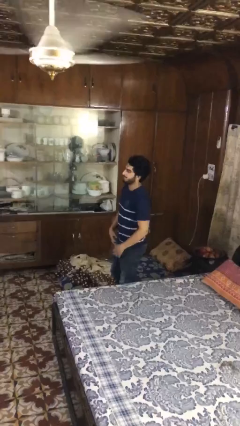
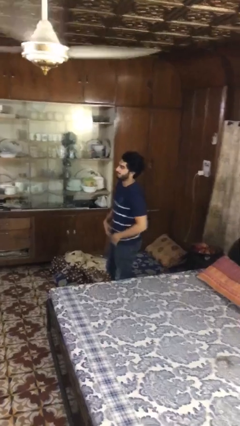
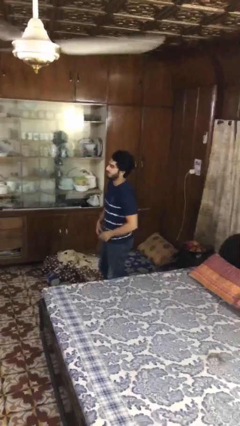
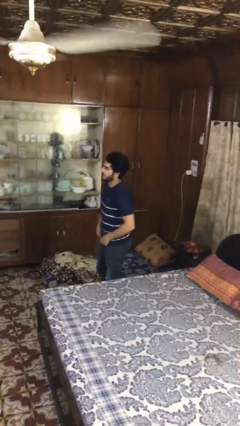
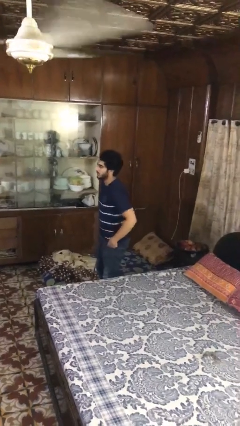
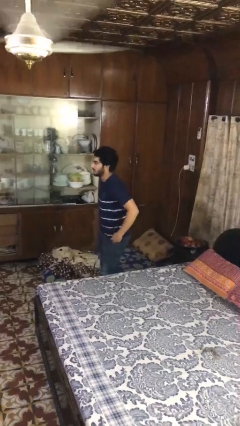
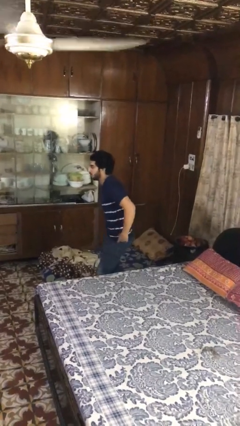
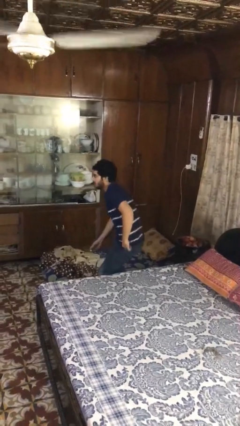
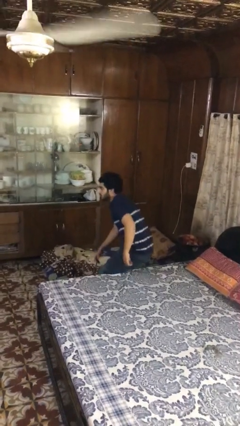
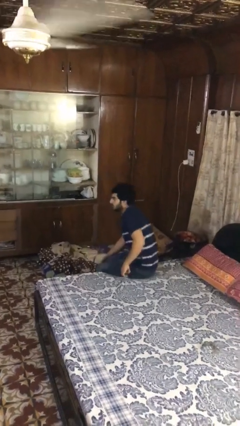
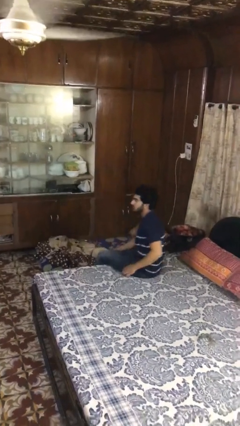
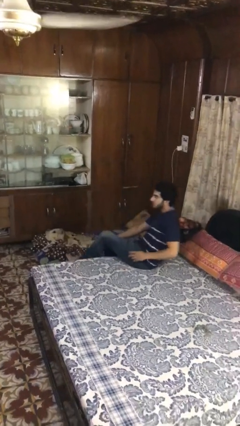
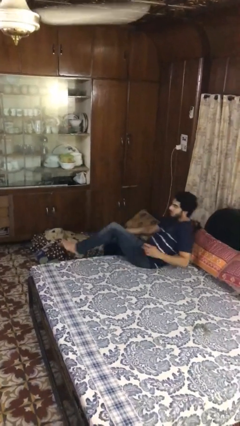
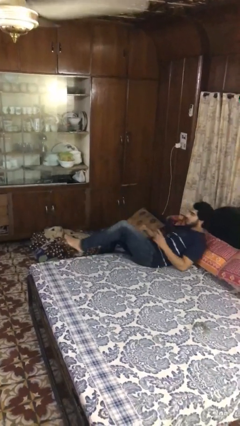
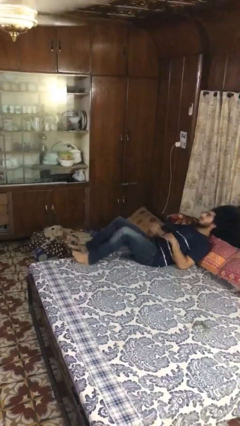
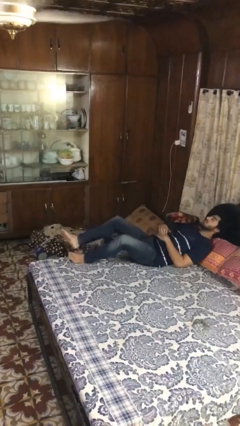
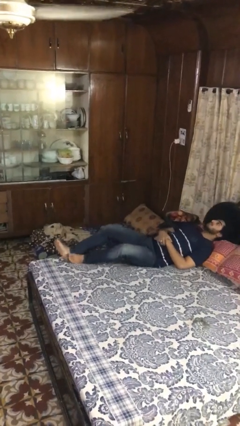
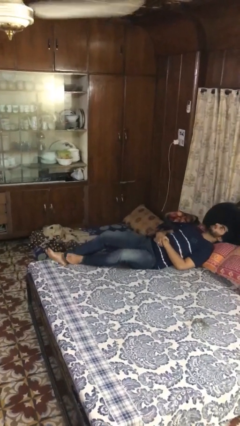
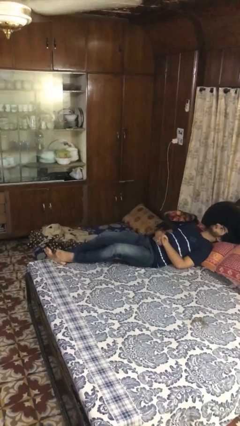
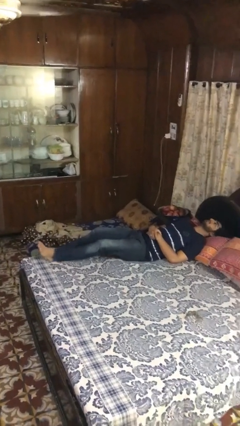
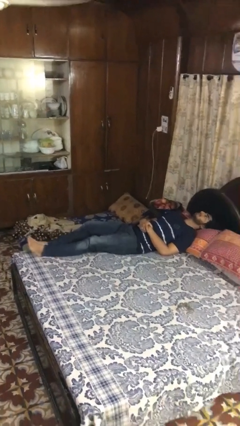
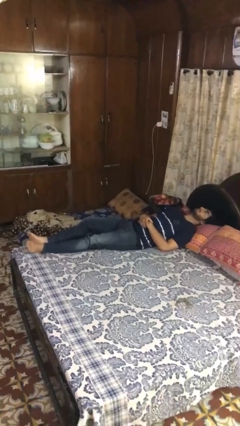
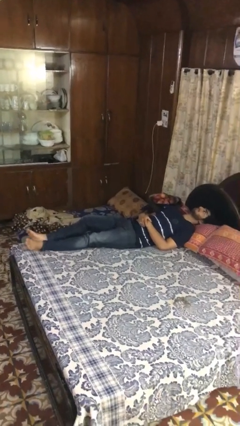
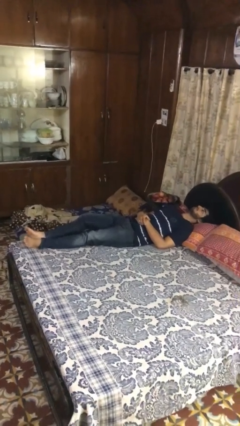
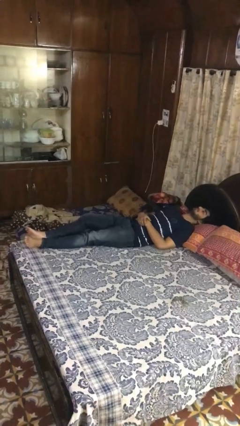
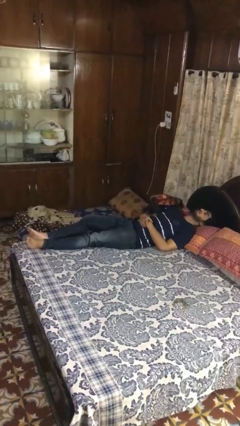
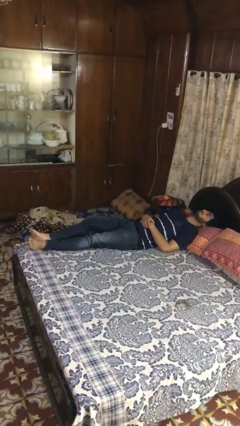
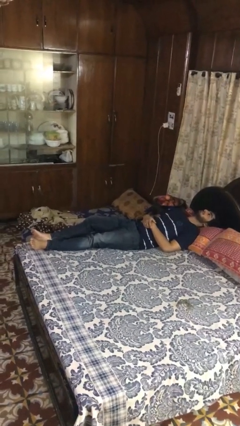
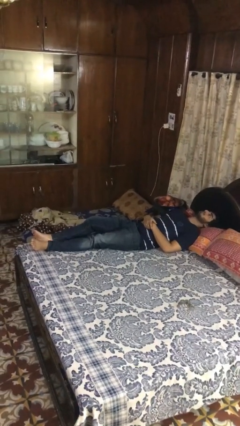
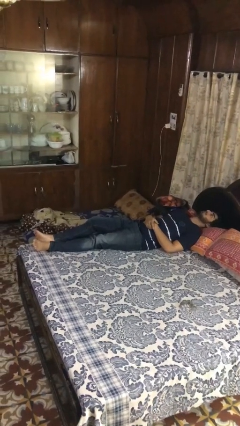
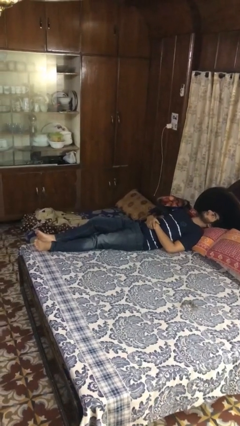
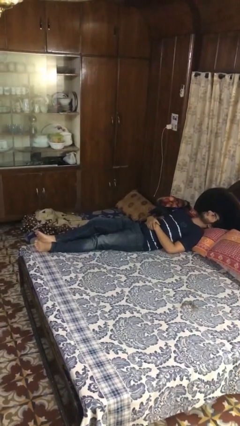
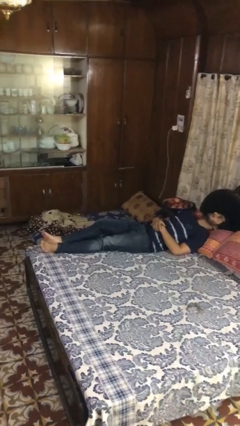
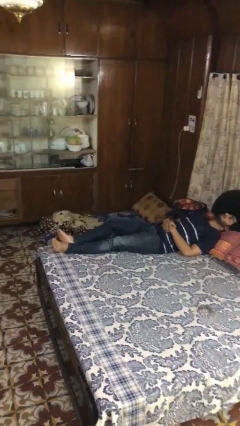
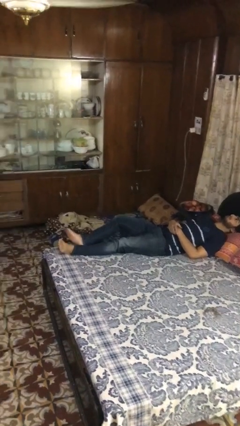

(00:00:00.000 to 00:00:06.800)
person lies down on bed

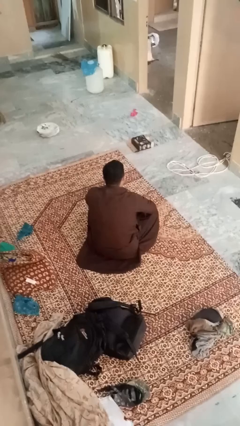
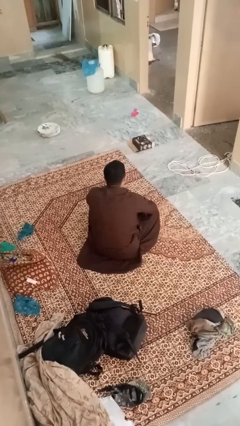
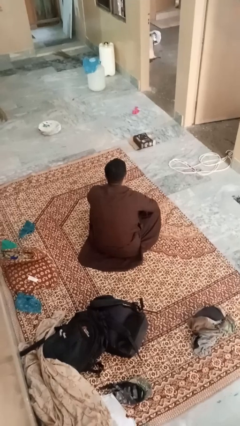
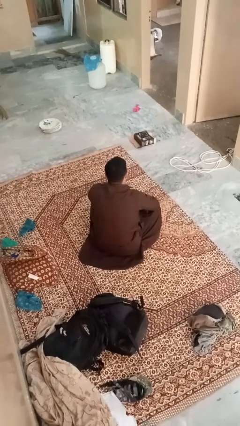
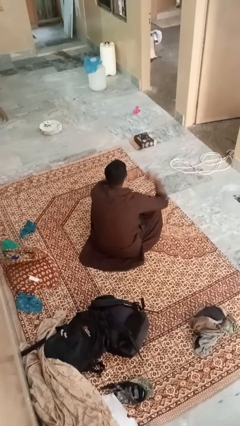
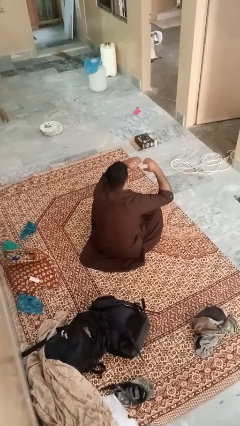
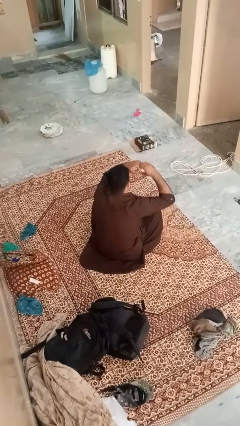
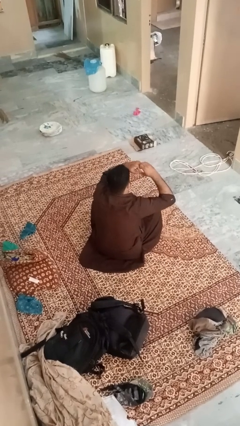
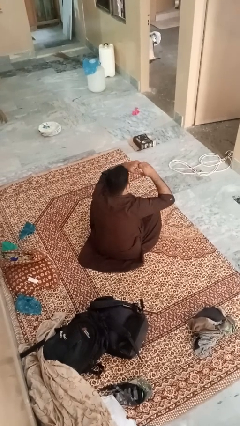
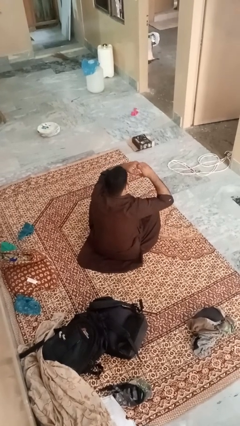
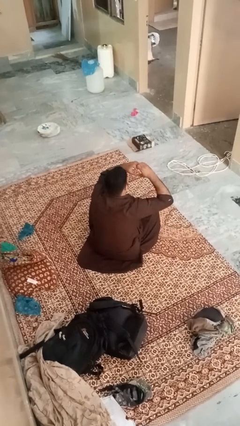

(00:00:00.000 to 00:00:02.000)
person gestures heart

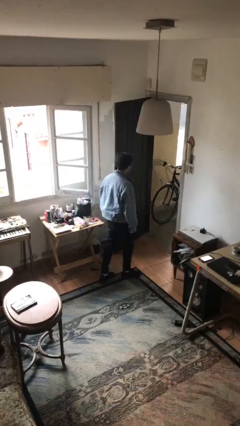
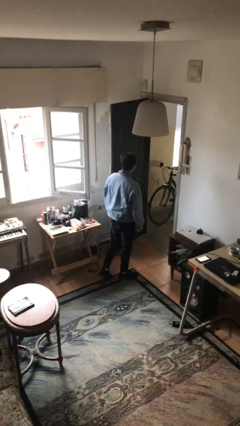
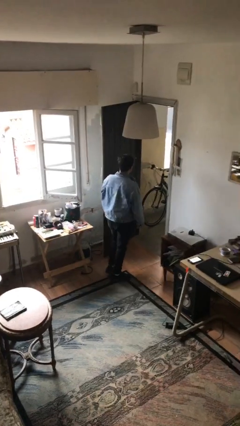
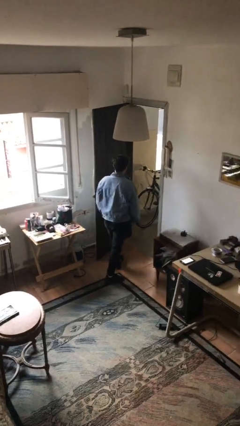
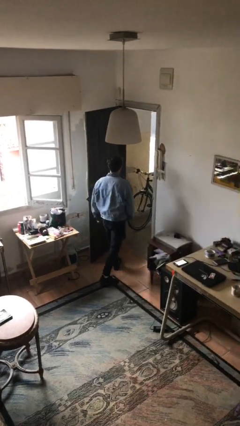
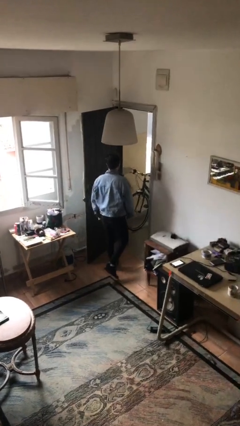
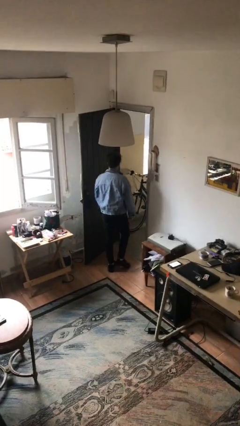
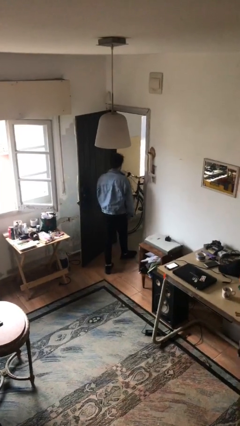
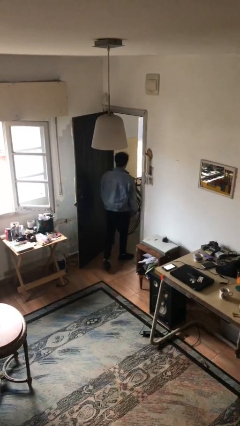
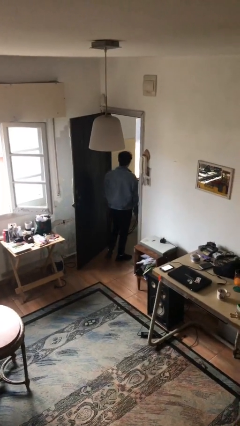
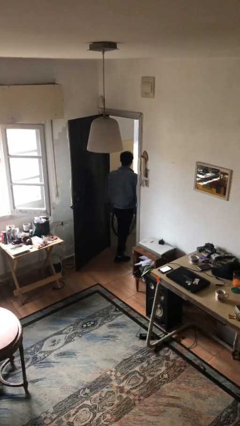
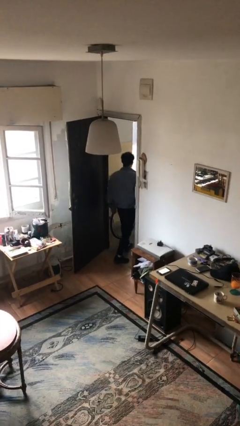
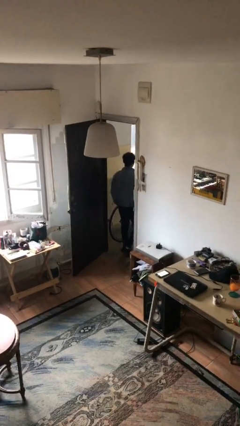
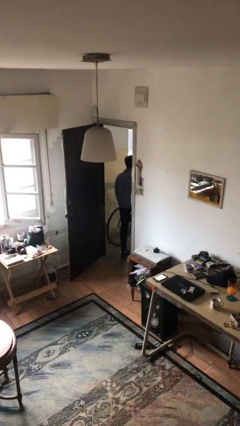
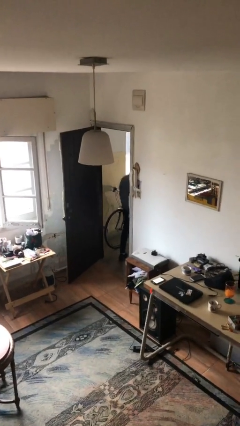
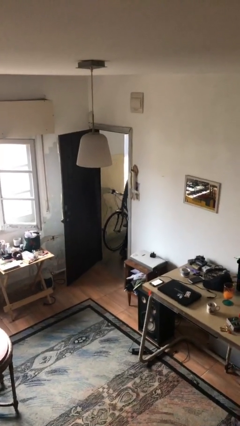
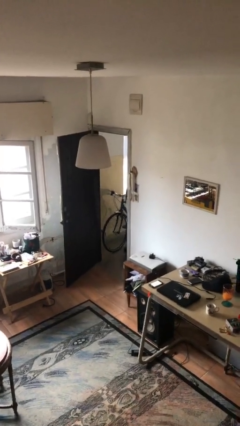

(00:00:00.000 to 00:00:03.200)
person exits scene through structure

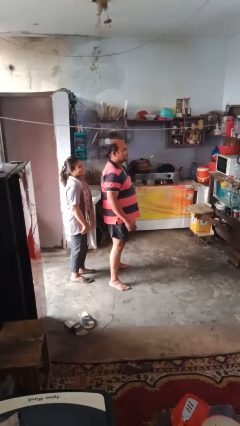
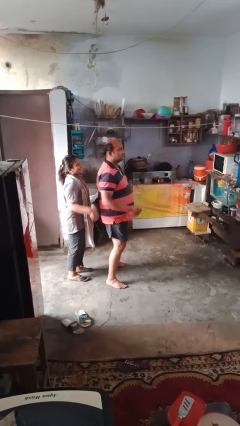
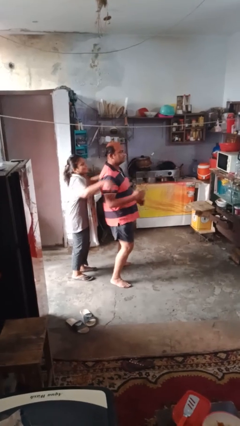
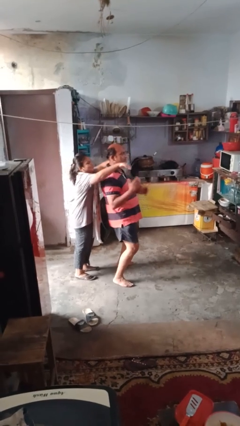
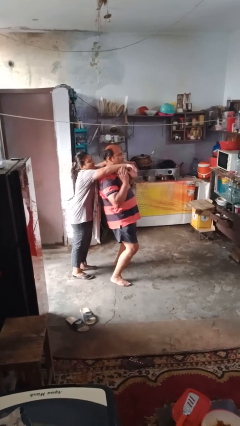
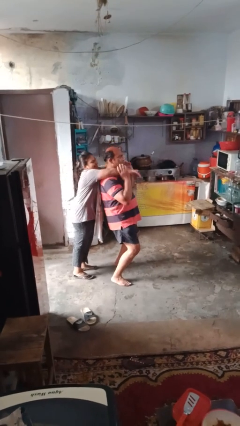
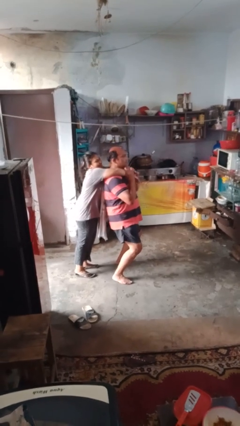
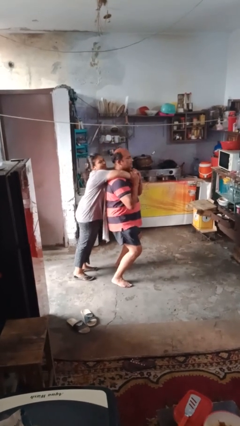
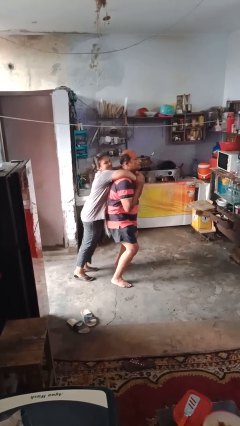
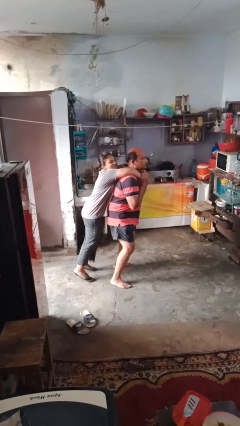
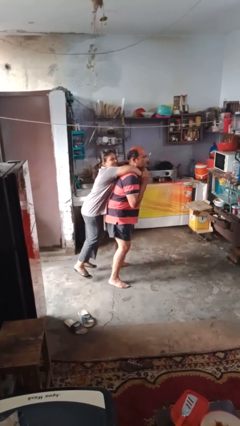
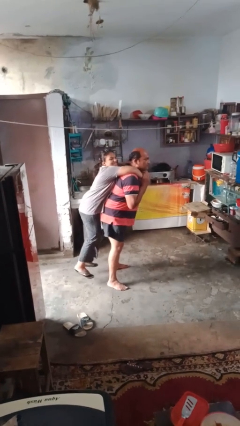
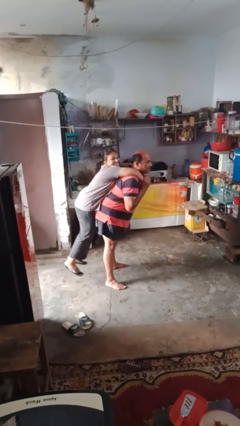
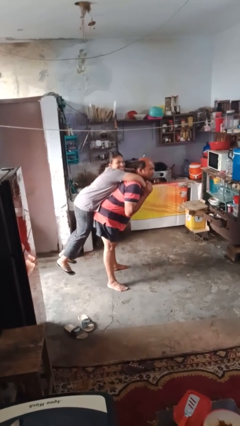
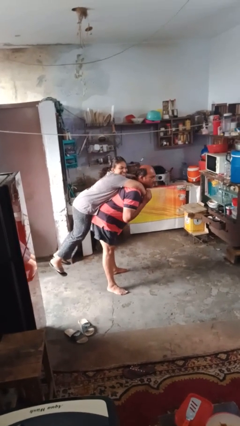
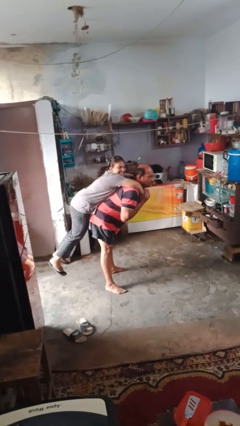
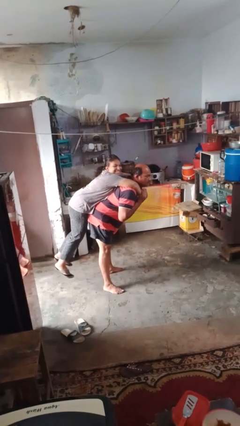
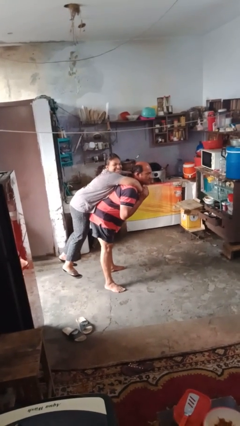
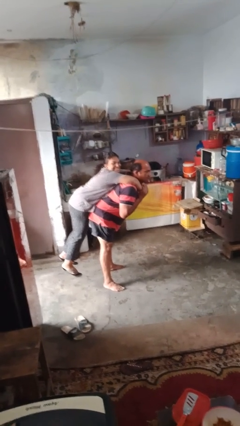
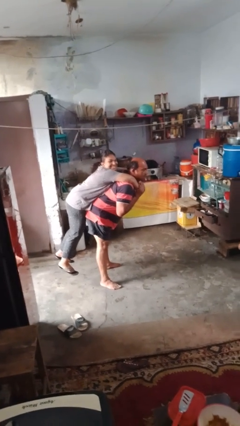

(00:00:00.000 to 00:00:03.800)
person carries person on shoulders

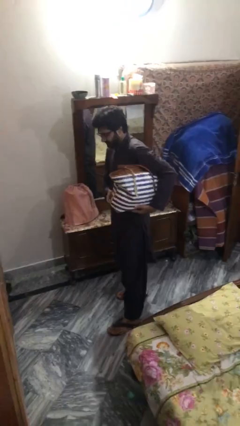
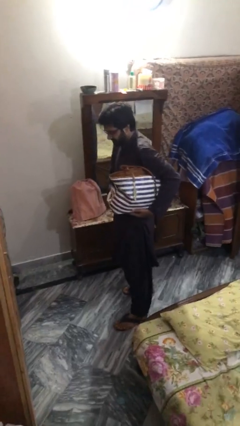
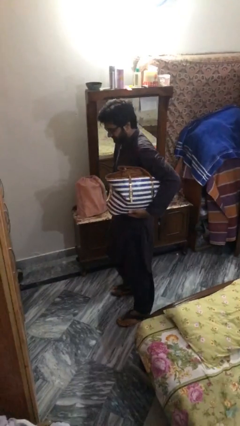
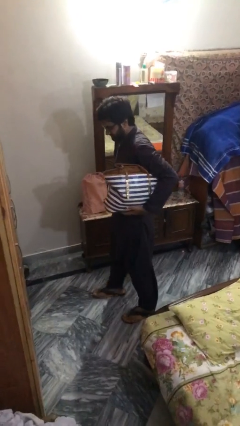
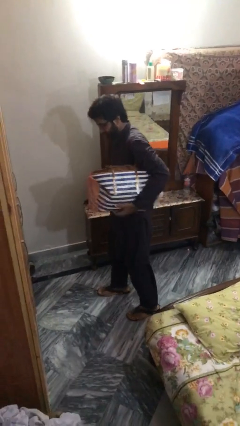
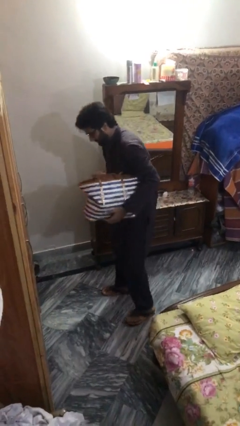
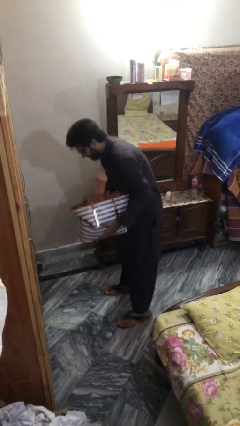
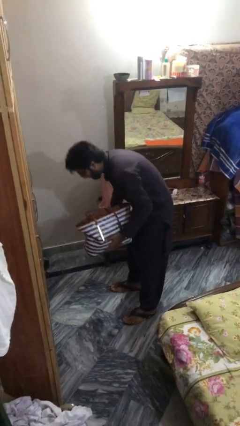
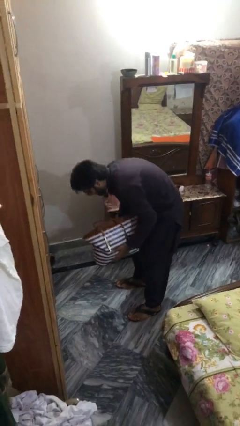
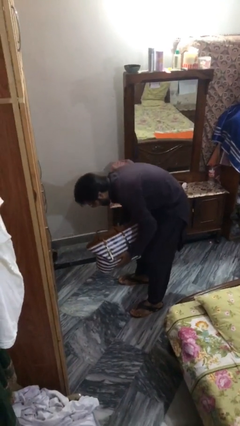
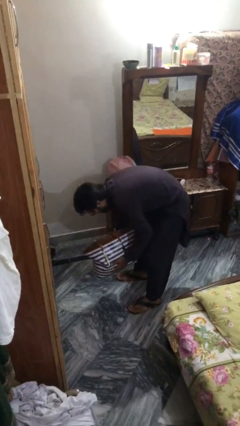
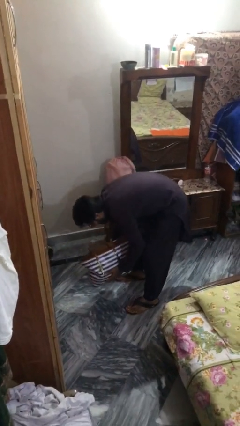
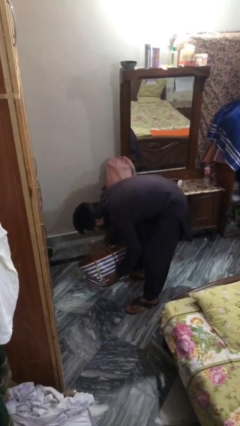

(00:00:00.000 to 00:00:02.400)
person puts down object on floor
